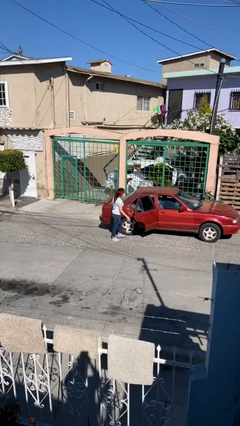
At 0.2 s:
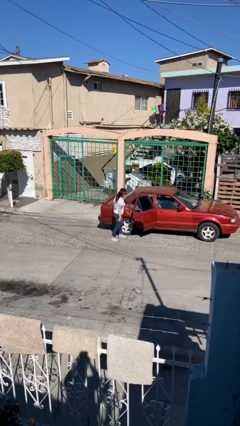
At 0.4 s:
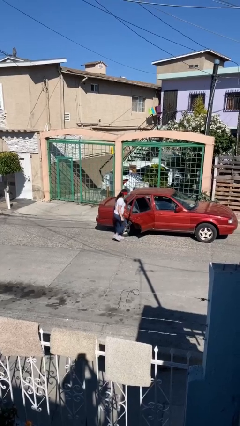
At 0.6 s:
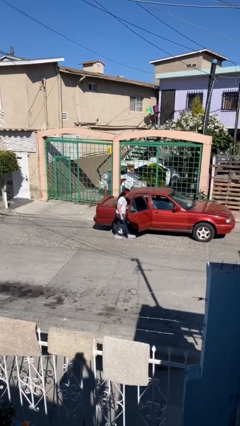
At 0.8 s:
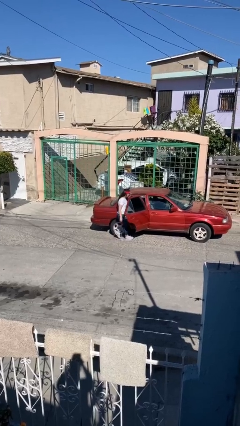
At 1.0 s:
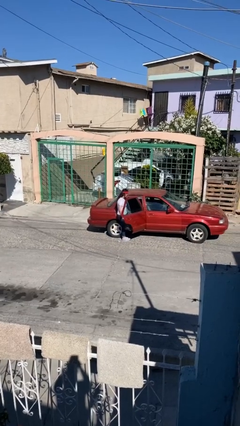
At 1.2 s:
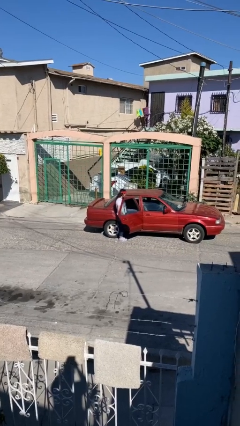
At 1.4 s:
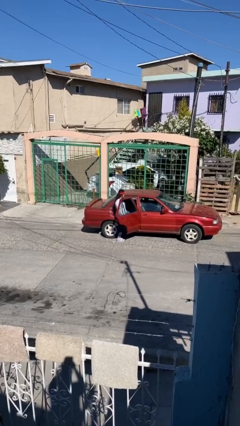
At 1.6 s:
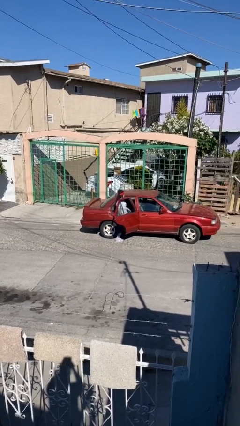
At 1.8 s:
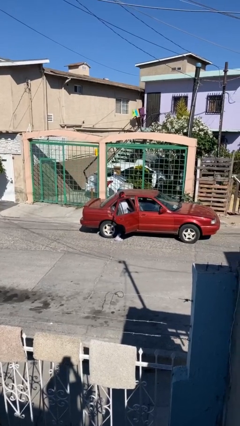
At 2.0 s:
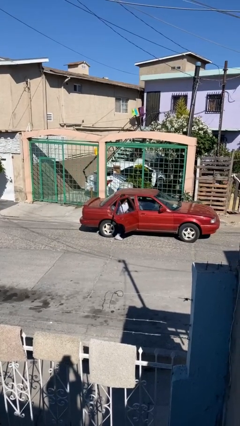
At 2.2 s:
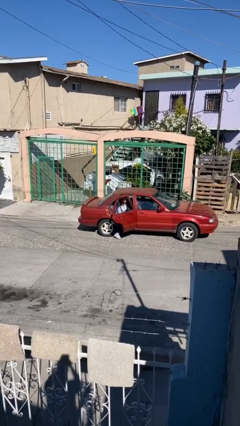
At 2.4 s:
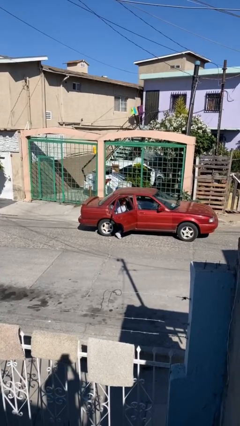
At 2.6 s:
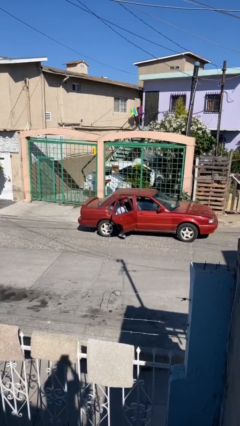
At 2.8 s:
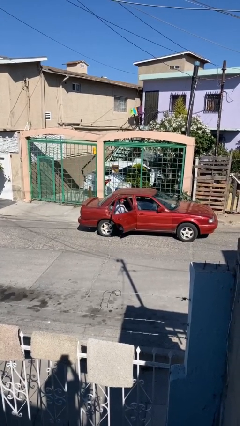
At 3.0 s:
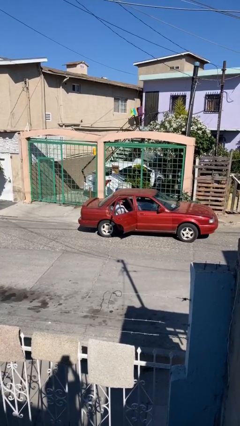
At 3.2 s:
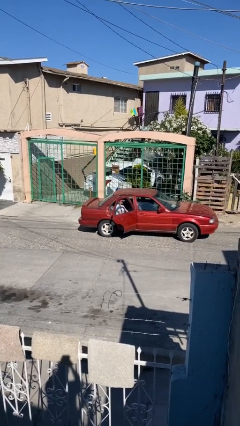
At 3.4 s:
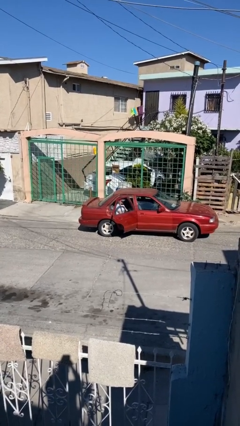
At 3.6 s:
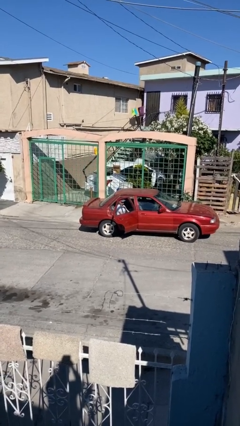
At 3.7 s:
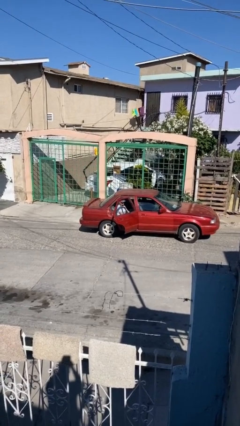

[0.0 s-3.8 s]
person enters car

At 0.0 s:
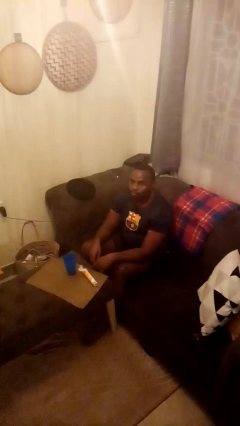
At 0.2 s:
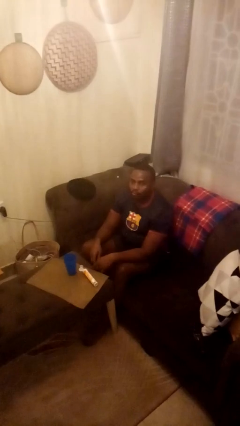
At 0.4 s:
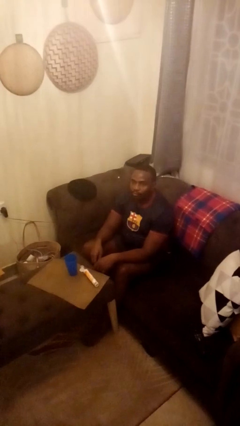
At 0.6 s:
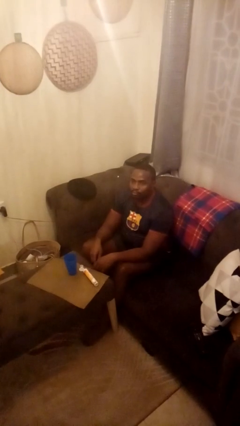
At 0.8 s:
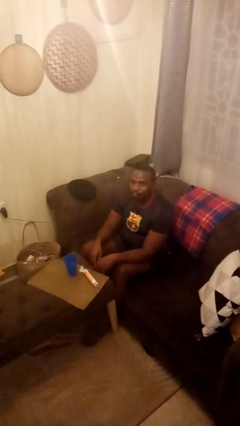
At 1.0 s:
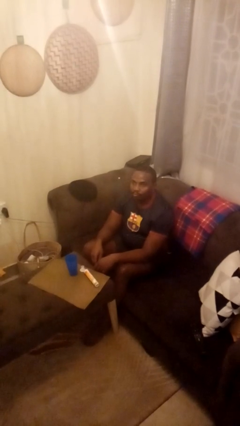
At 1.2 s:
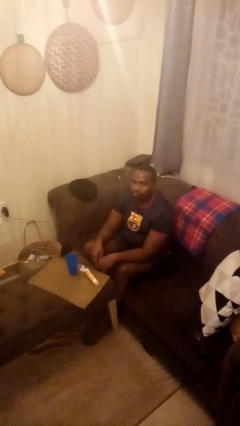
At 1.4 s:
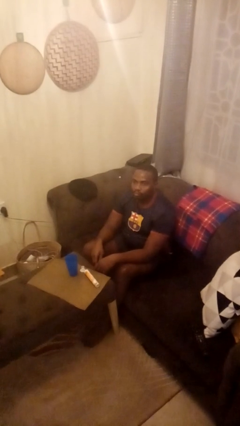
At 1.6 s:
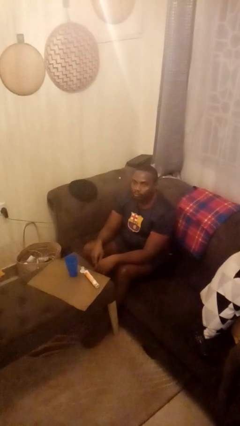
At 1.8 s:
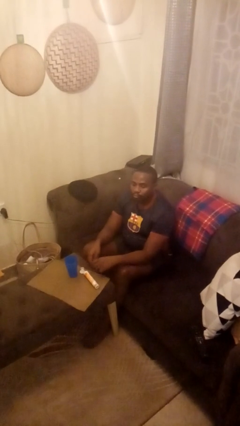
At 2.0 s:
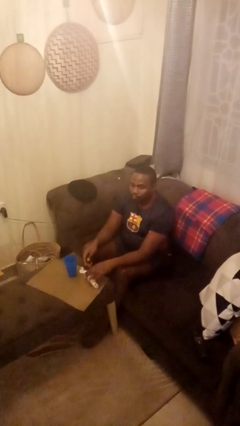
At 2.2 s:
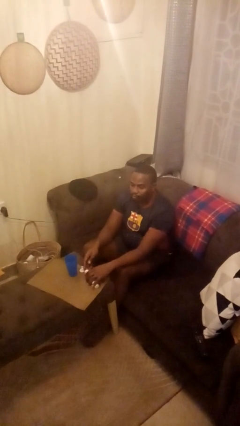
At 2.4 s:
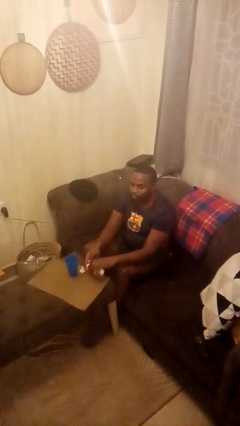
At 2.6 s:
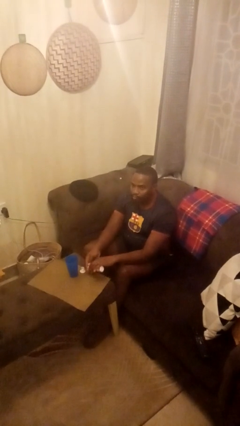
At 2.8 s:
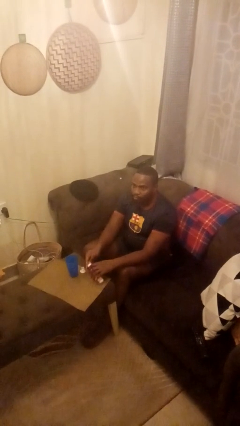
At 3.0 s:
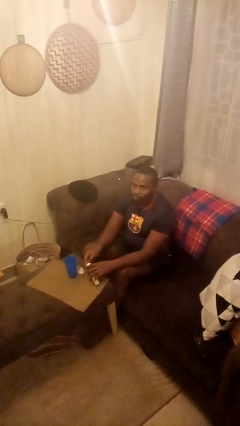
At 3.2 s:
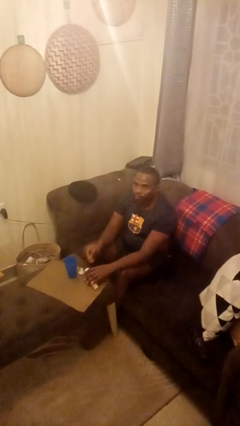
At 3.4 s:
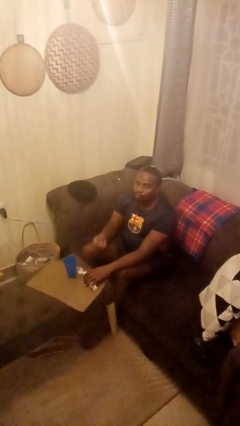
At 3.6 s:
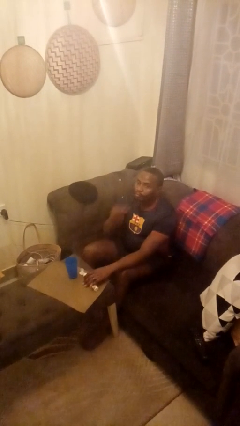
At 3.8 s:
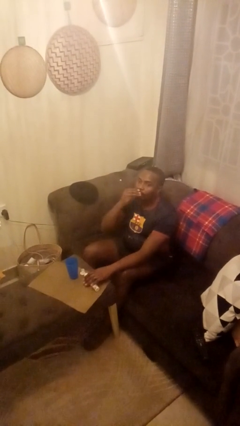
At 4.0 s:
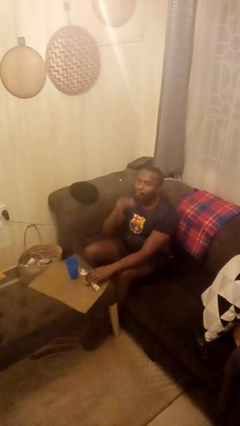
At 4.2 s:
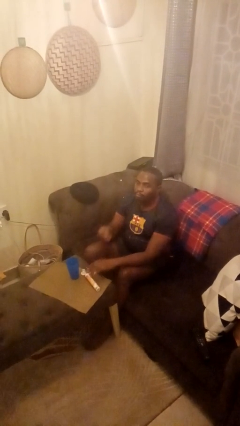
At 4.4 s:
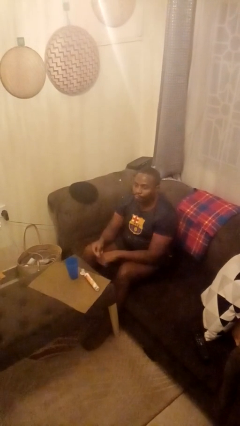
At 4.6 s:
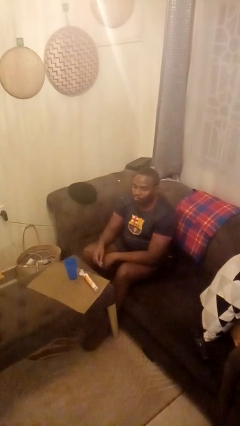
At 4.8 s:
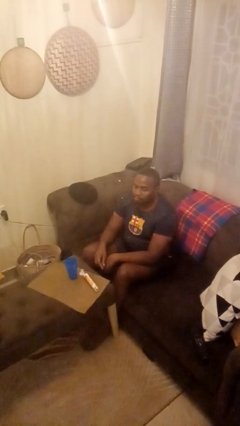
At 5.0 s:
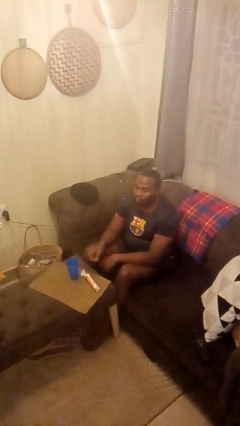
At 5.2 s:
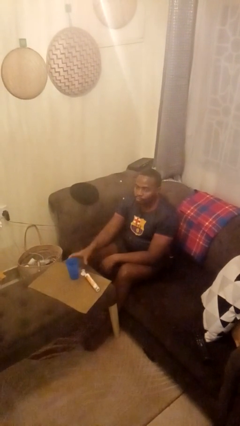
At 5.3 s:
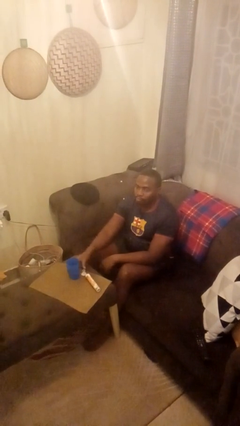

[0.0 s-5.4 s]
person takes medicine pills

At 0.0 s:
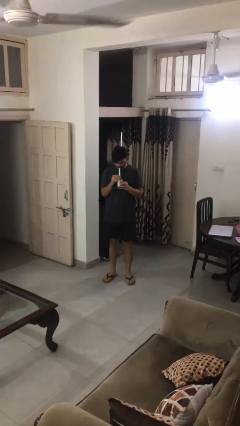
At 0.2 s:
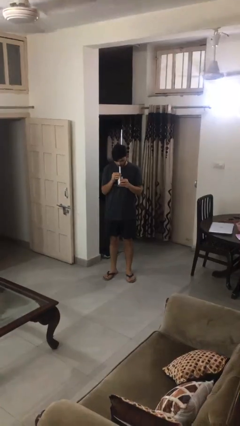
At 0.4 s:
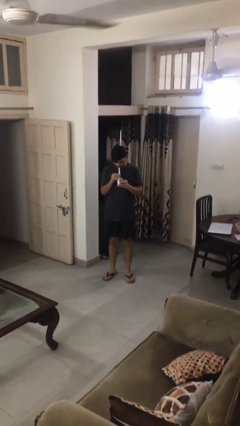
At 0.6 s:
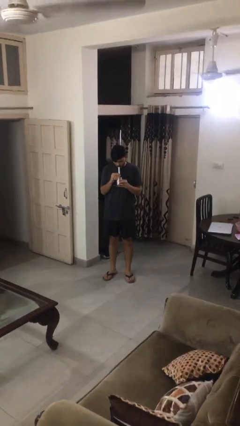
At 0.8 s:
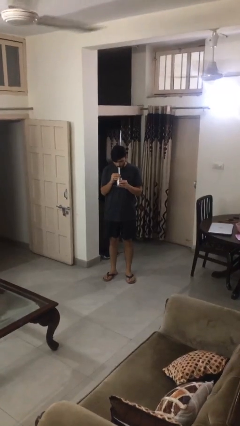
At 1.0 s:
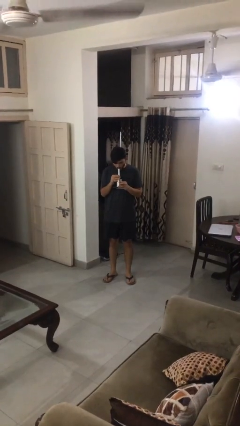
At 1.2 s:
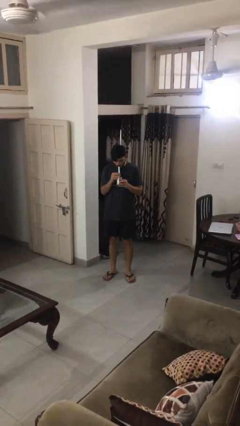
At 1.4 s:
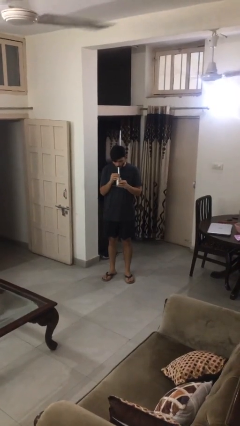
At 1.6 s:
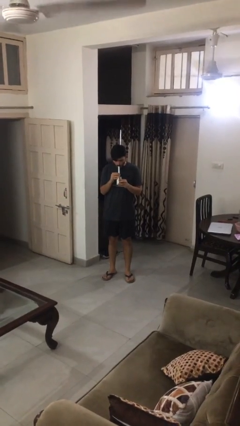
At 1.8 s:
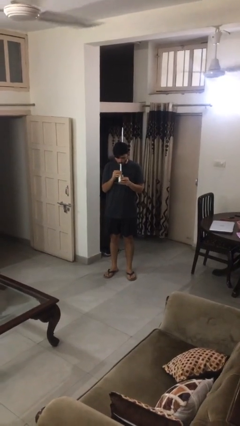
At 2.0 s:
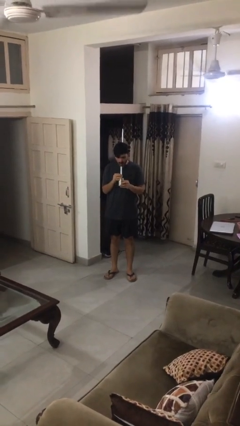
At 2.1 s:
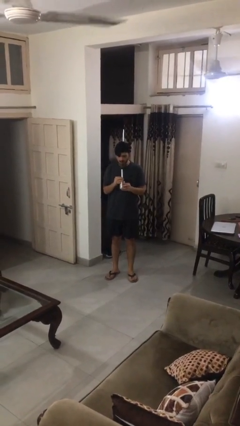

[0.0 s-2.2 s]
person drinks from straw

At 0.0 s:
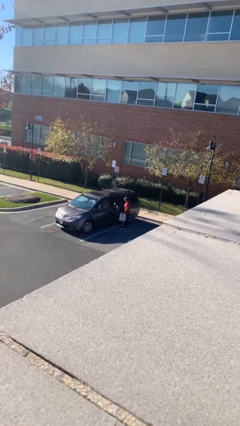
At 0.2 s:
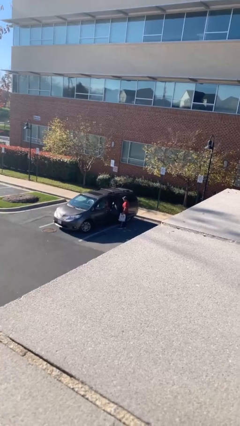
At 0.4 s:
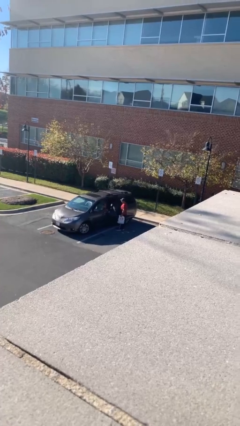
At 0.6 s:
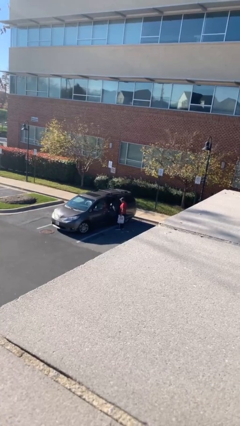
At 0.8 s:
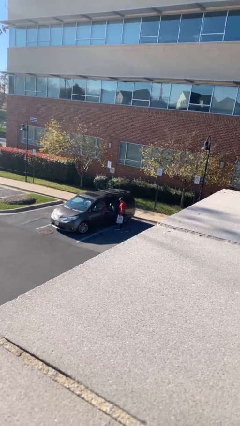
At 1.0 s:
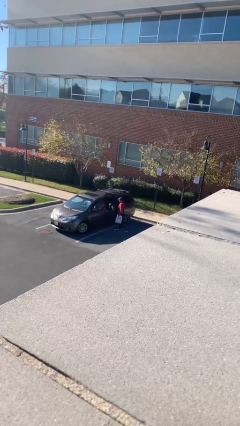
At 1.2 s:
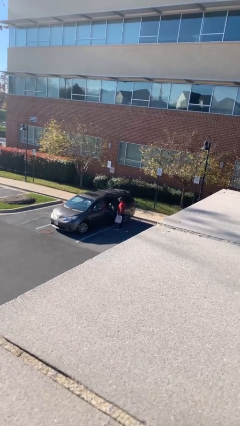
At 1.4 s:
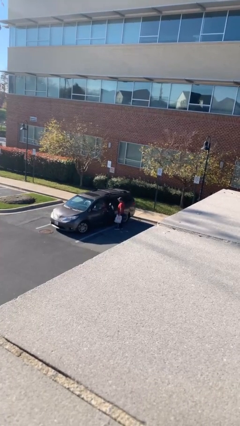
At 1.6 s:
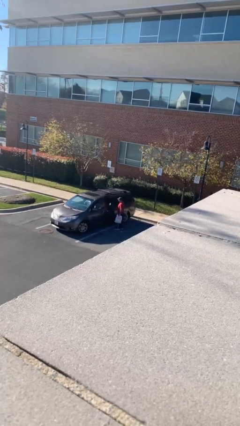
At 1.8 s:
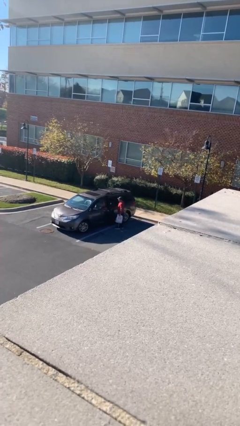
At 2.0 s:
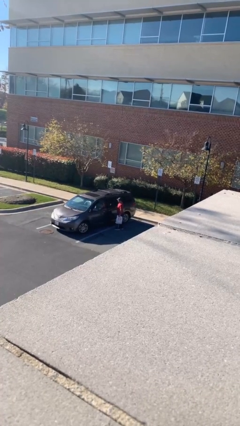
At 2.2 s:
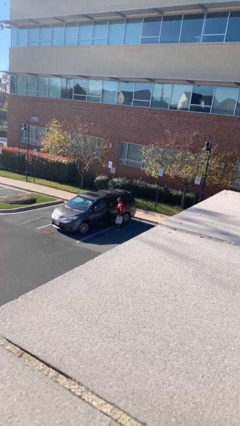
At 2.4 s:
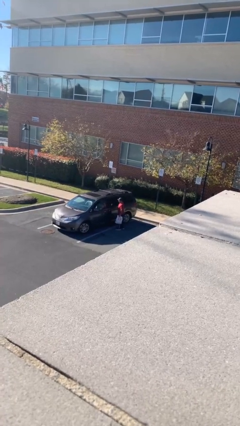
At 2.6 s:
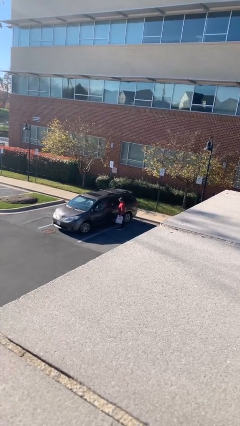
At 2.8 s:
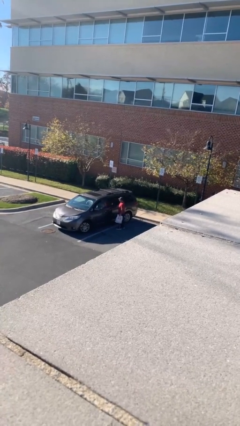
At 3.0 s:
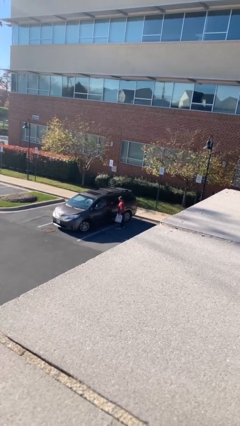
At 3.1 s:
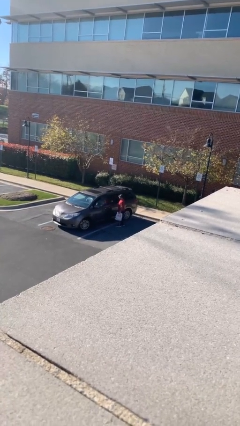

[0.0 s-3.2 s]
person closes car door

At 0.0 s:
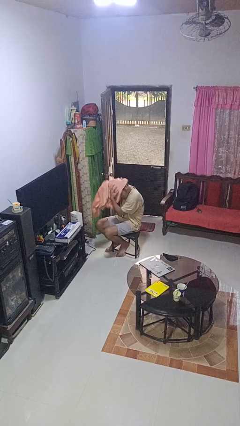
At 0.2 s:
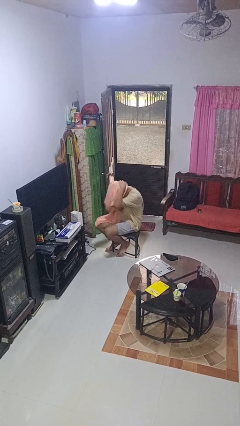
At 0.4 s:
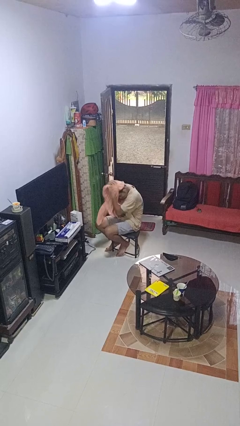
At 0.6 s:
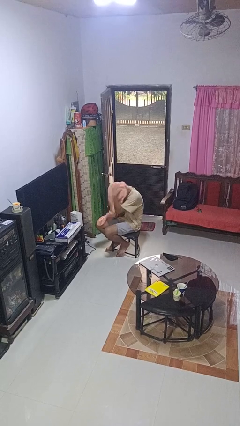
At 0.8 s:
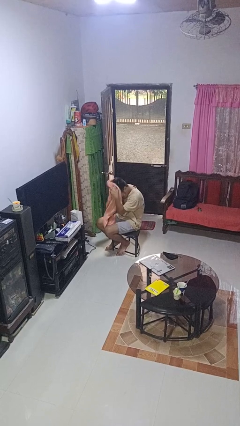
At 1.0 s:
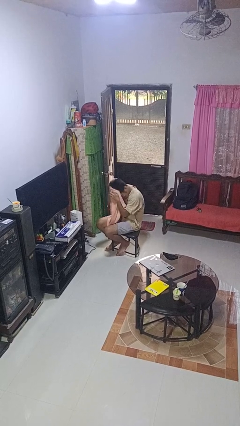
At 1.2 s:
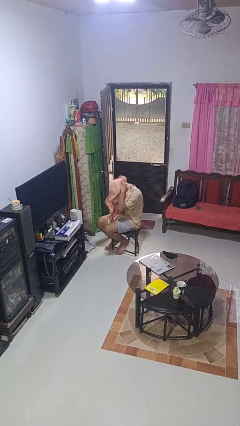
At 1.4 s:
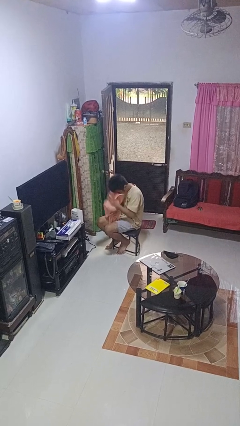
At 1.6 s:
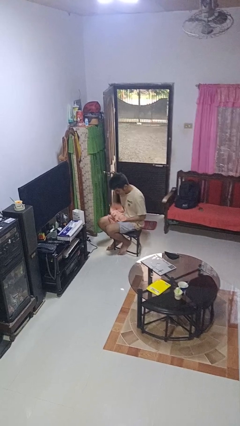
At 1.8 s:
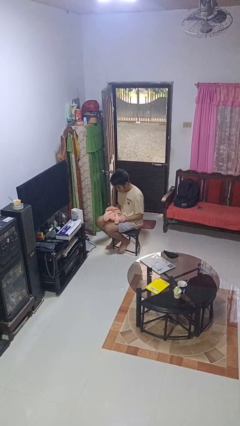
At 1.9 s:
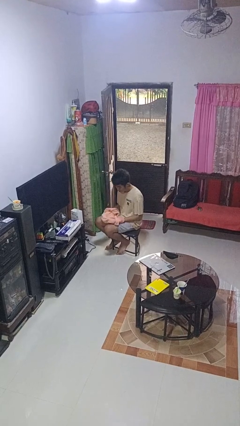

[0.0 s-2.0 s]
person dries hair with towel

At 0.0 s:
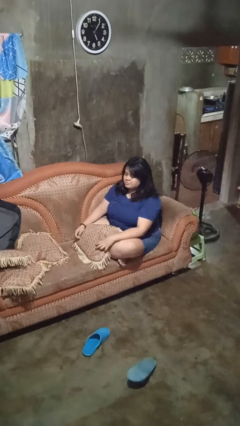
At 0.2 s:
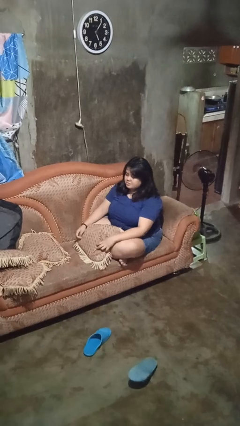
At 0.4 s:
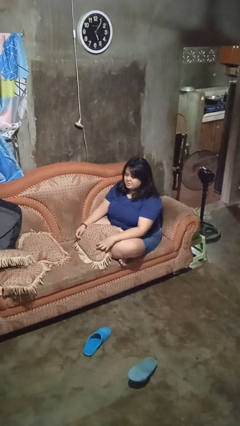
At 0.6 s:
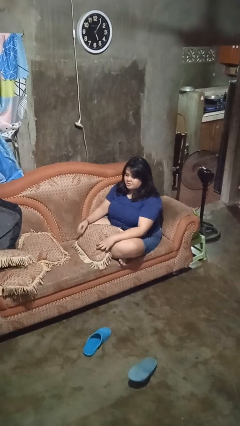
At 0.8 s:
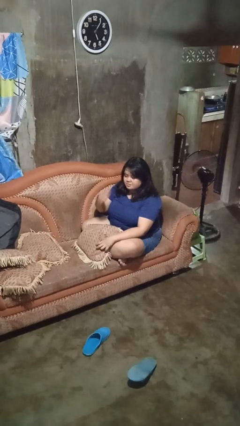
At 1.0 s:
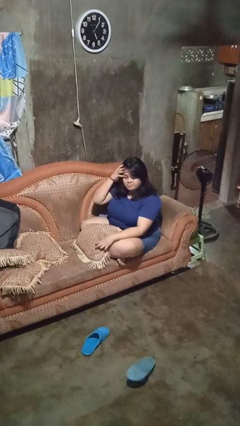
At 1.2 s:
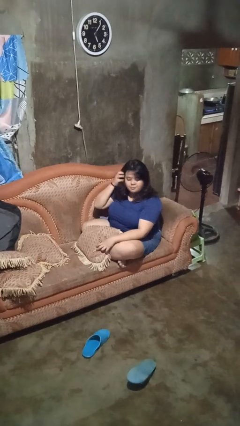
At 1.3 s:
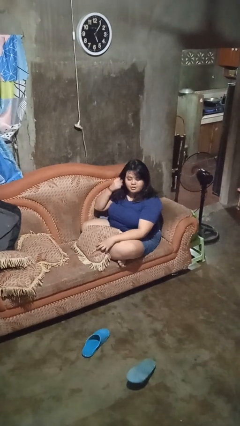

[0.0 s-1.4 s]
person strokes hair
